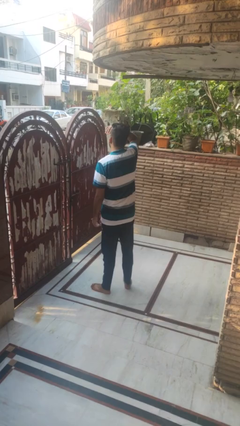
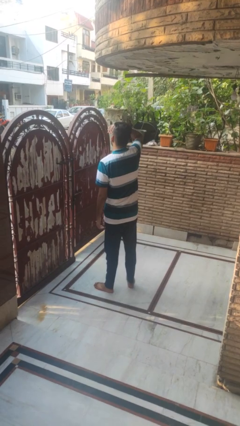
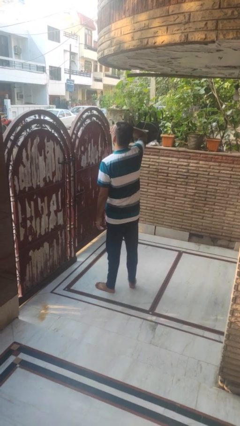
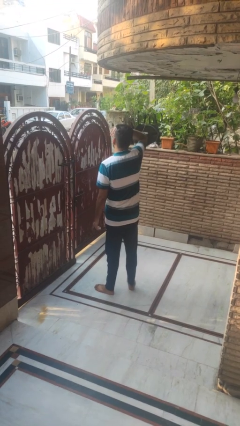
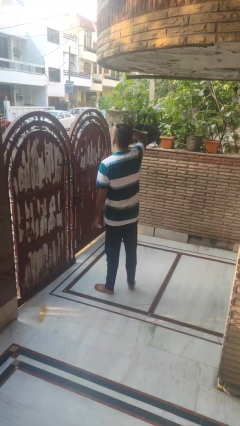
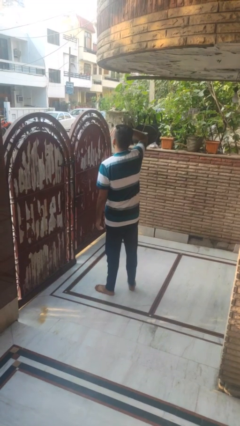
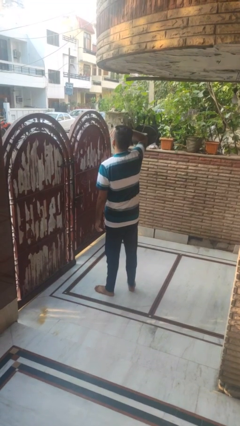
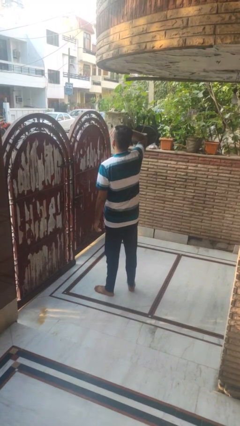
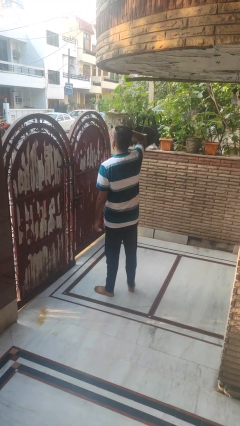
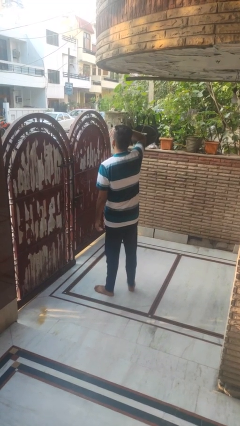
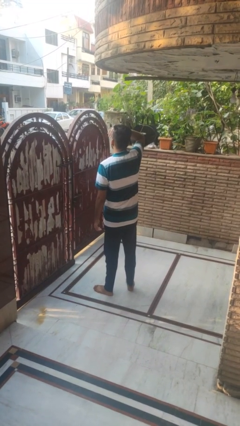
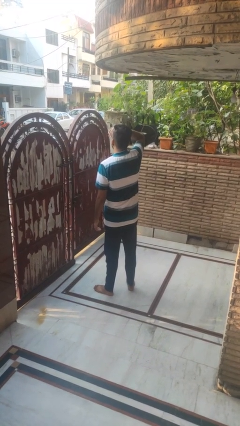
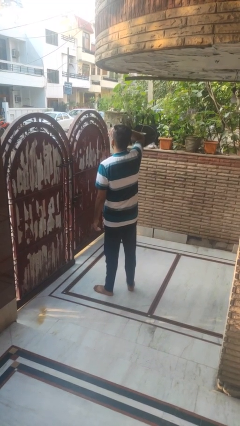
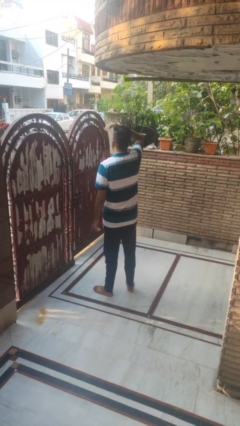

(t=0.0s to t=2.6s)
person shades eyes

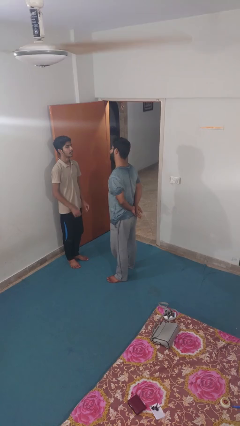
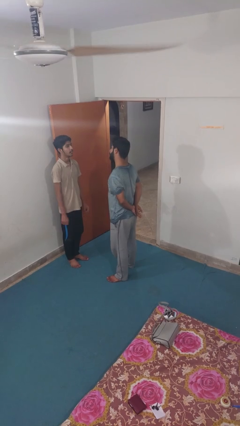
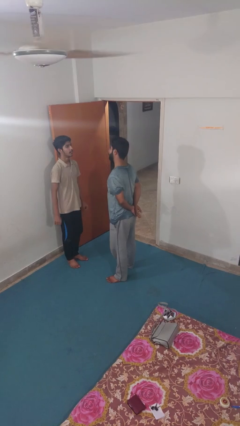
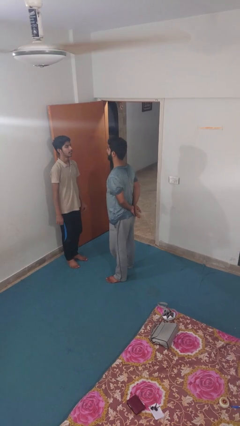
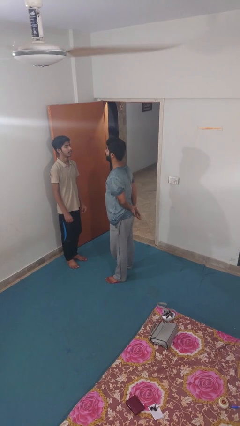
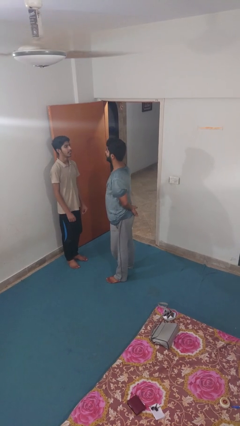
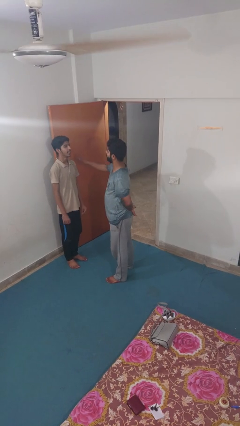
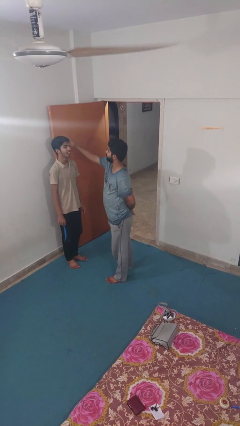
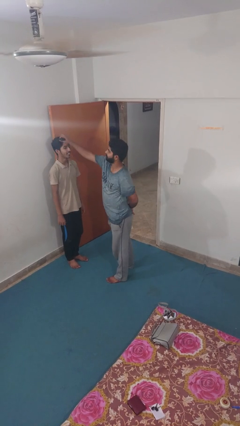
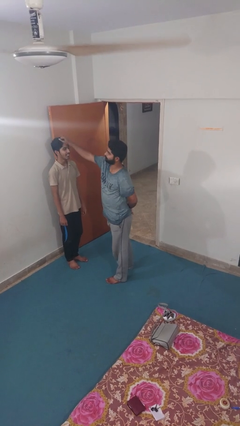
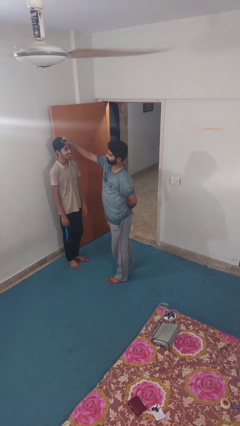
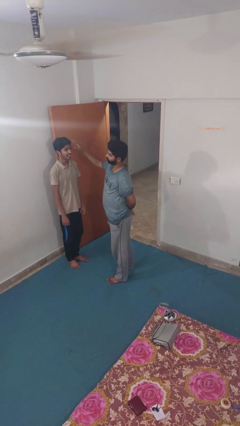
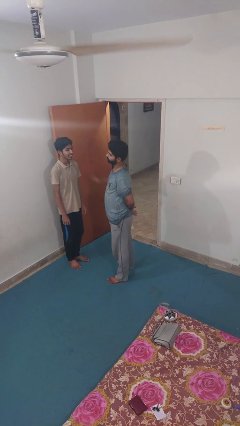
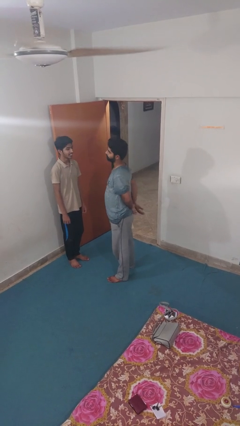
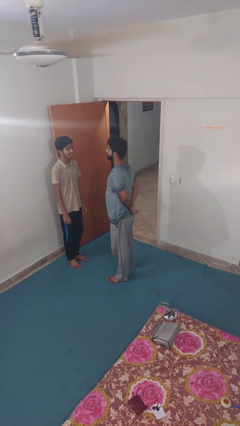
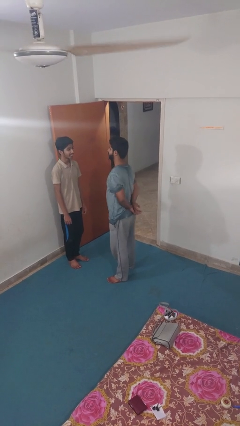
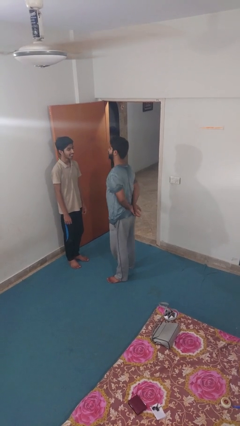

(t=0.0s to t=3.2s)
person grabs person by hair

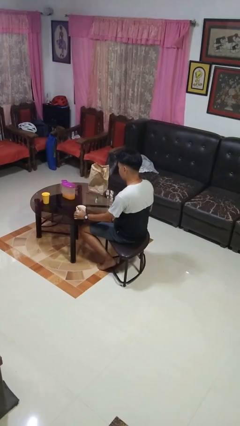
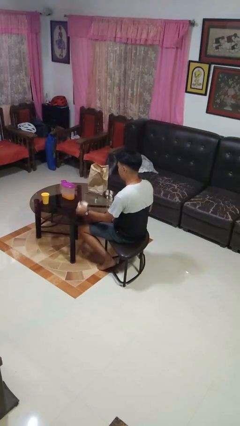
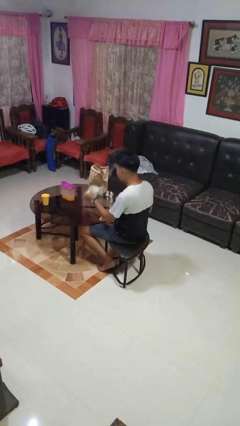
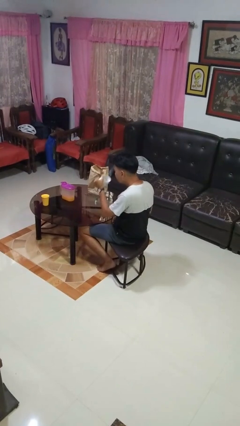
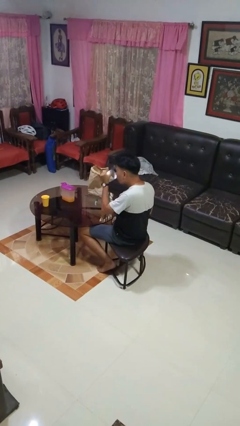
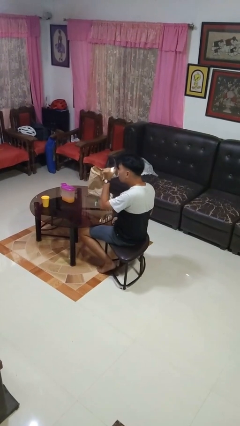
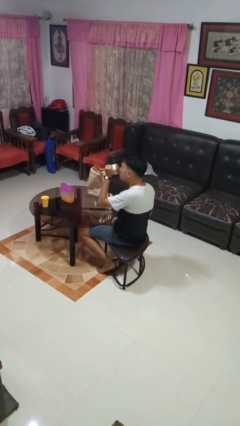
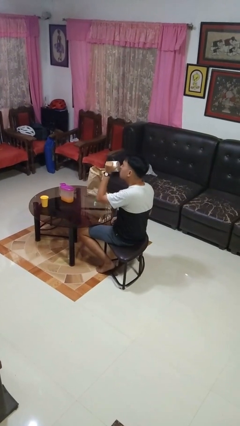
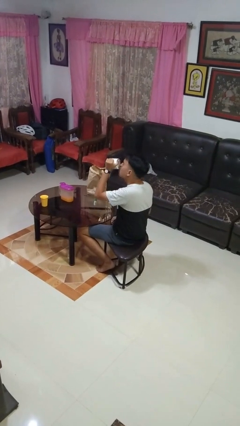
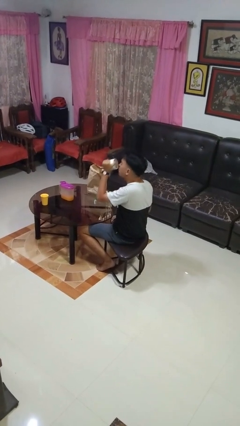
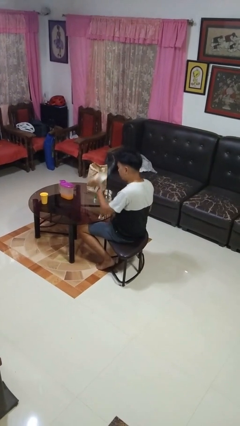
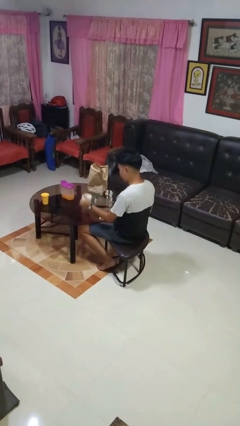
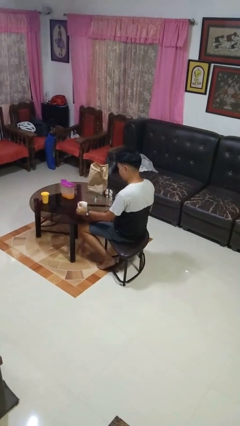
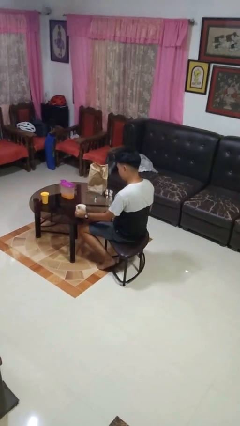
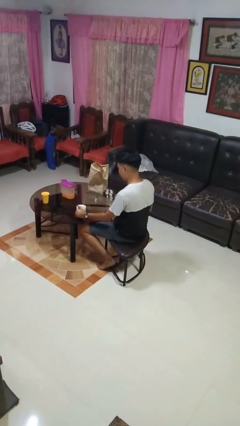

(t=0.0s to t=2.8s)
person drinks from mug

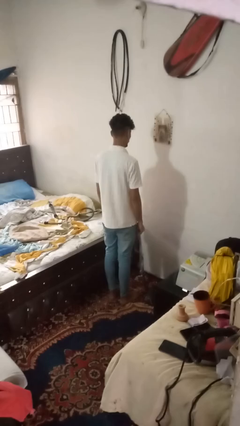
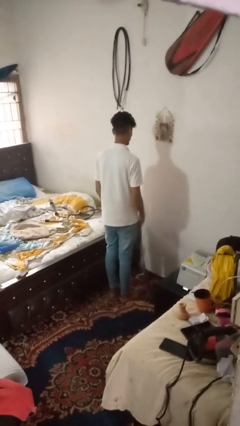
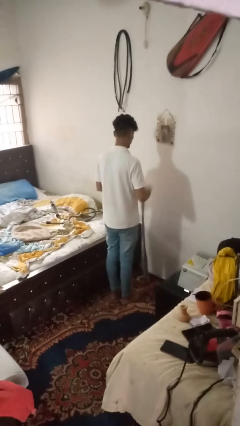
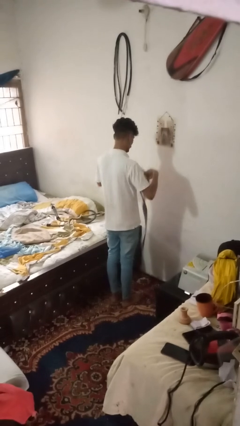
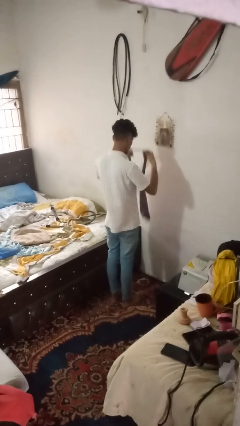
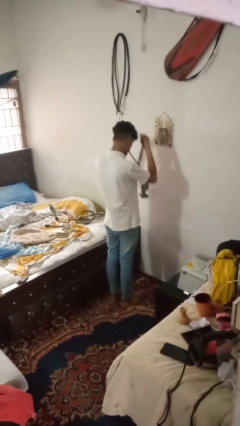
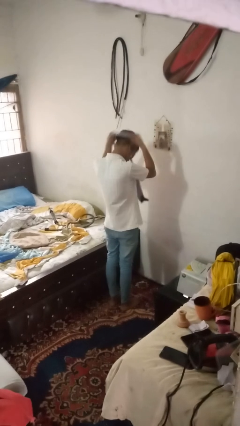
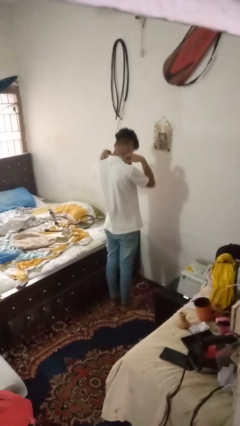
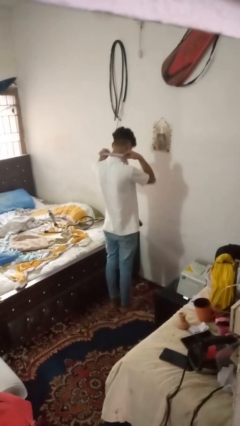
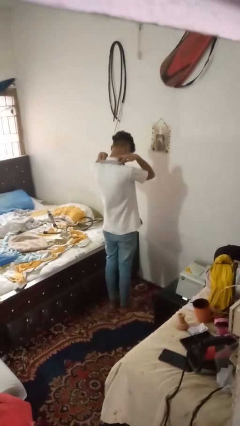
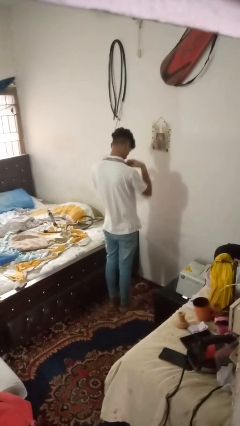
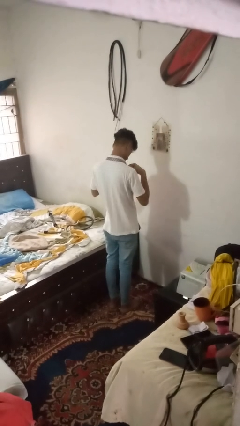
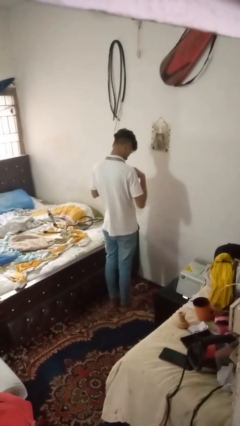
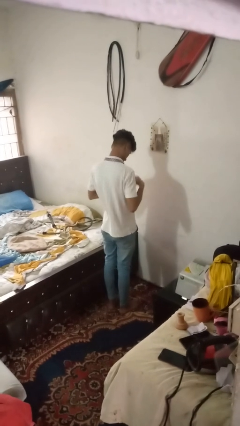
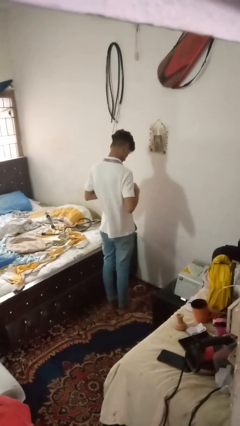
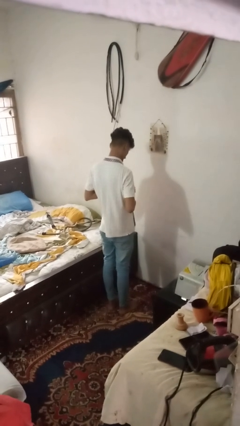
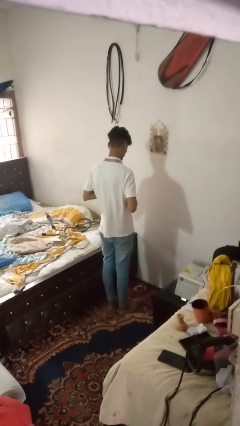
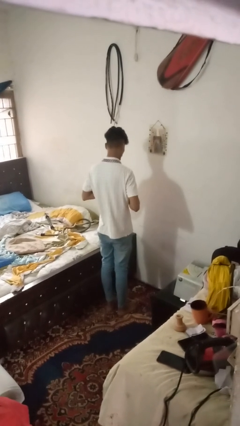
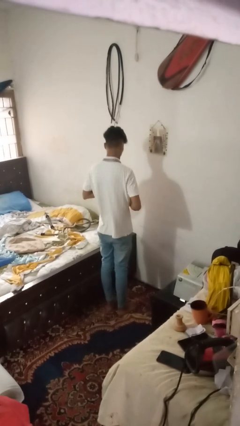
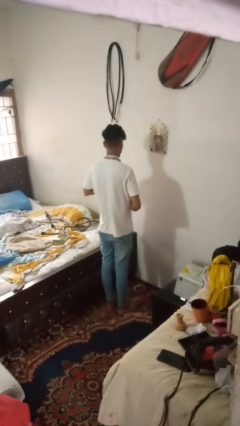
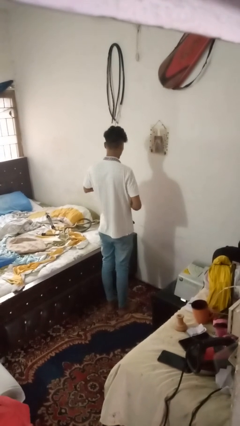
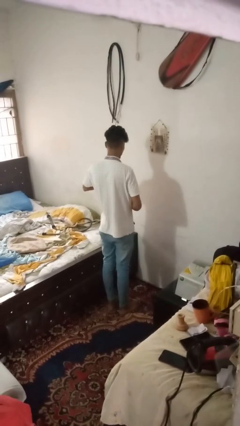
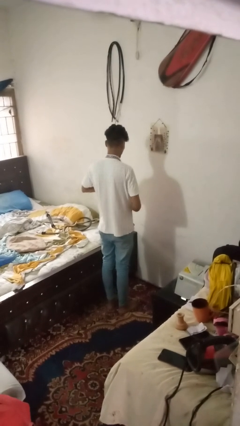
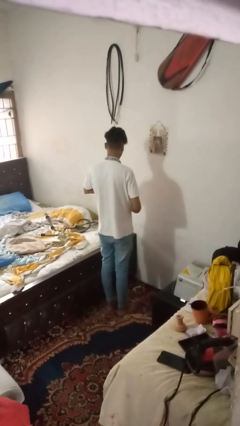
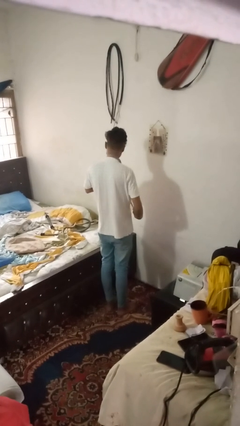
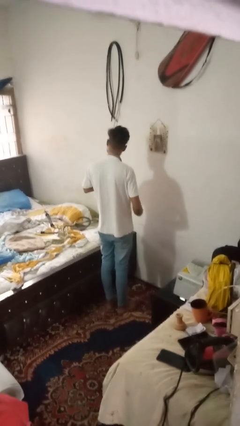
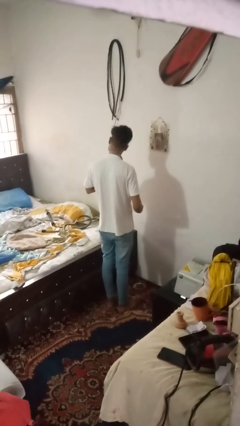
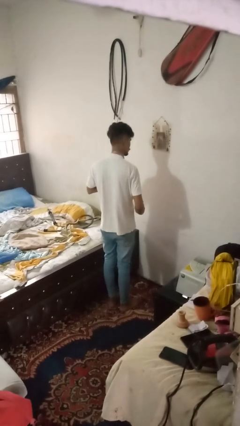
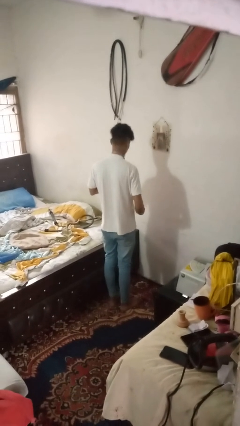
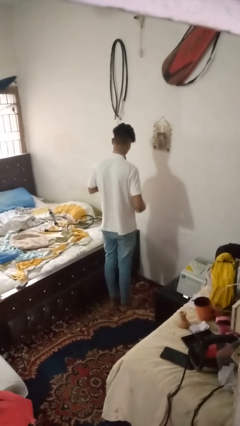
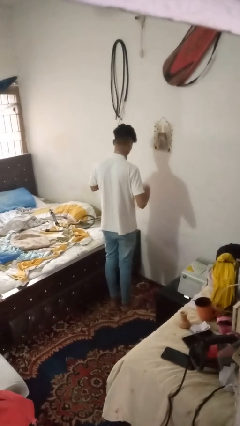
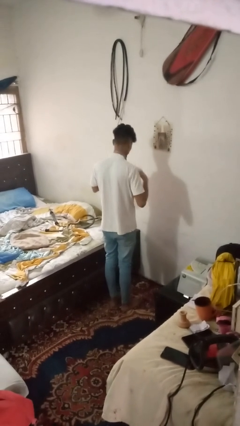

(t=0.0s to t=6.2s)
person puts on necktie

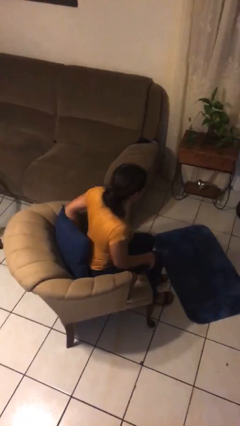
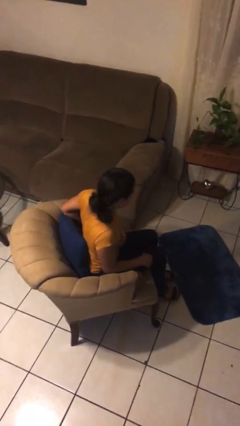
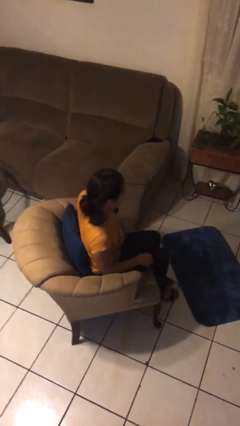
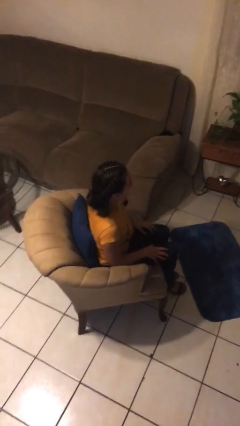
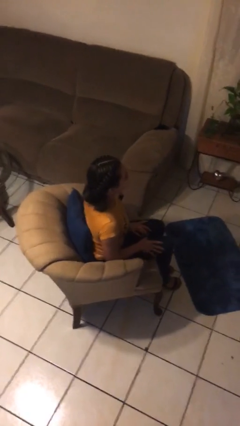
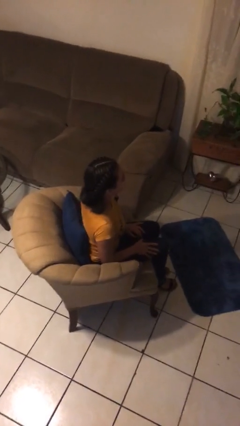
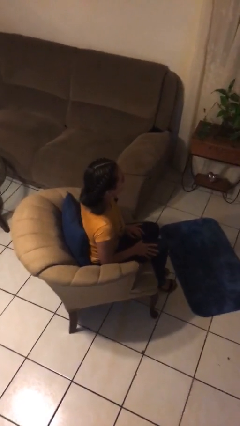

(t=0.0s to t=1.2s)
person sits down

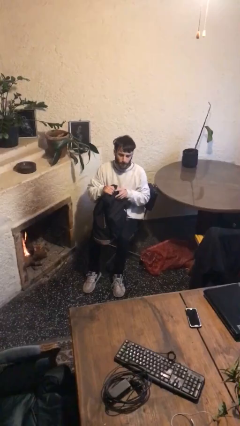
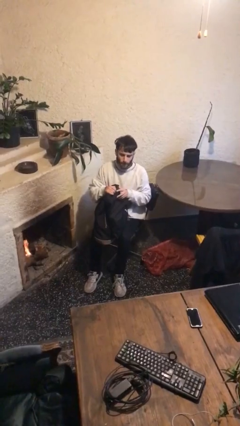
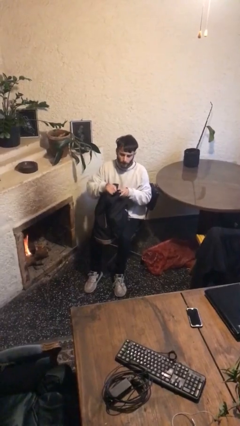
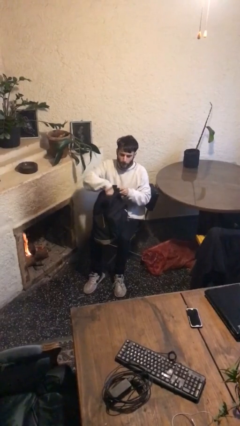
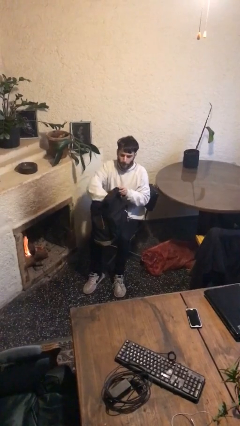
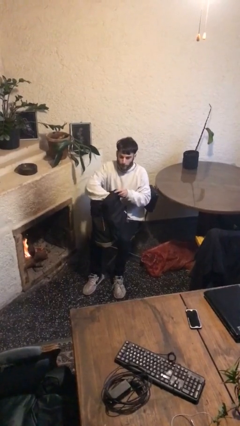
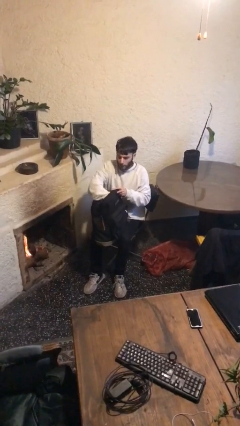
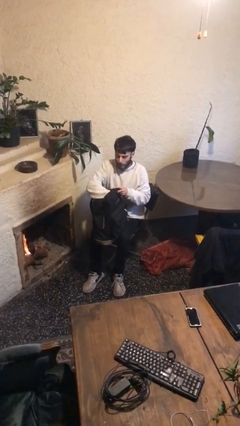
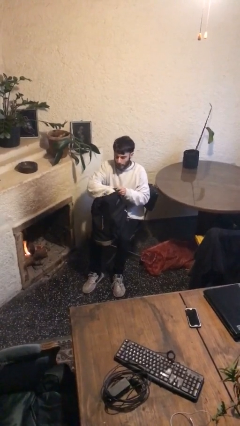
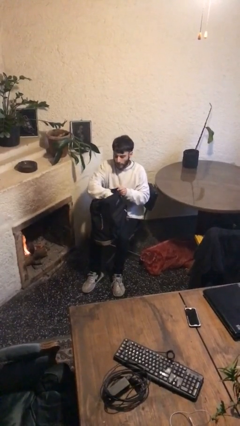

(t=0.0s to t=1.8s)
person searches in backpack
